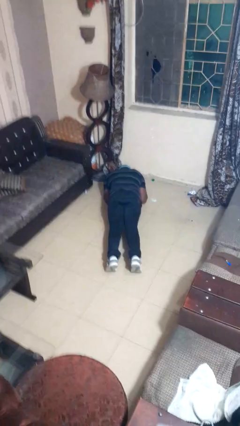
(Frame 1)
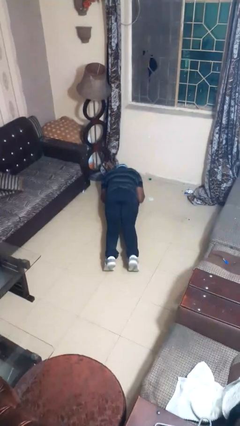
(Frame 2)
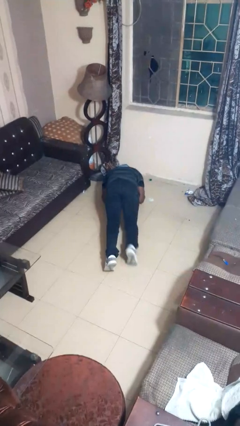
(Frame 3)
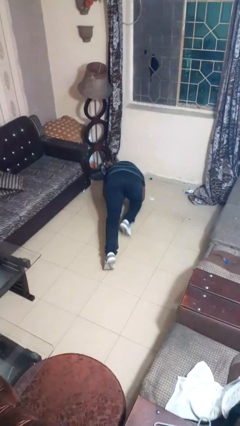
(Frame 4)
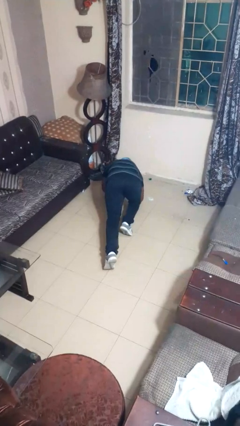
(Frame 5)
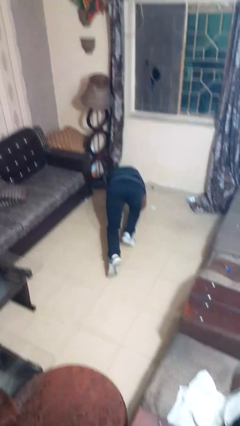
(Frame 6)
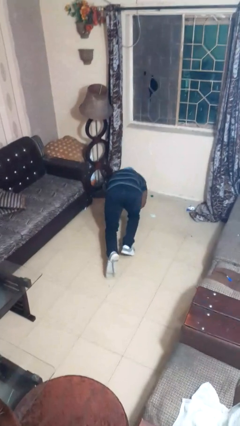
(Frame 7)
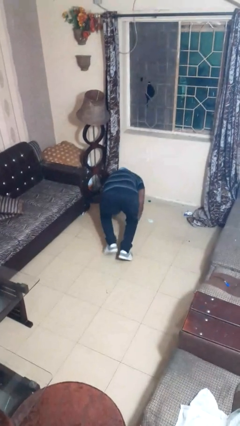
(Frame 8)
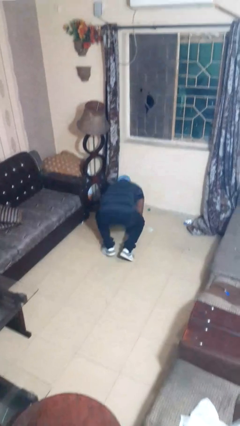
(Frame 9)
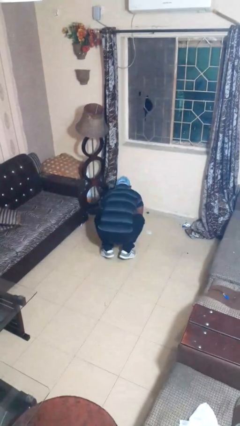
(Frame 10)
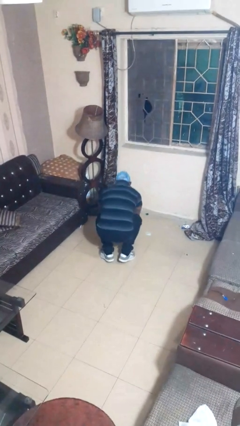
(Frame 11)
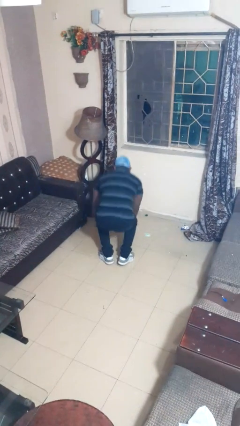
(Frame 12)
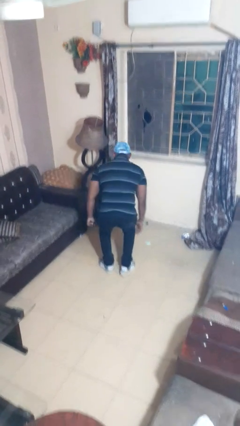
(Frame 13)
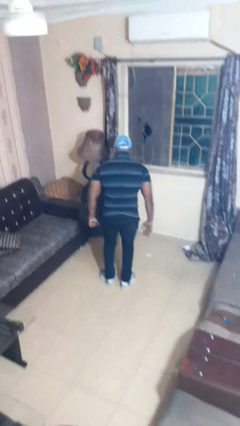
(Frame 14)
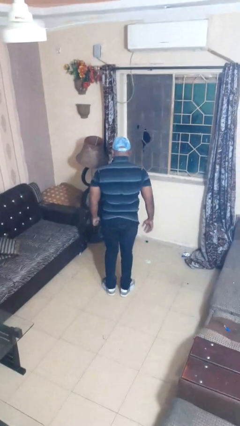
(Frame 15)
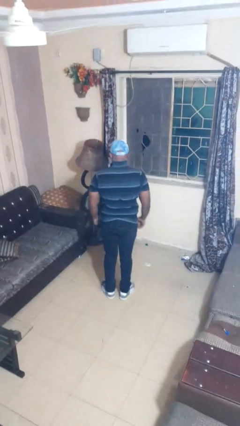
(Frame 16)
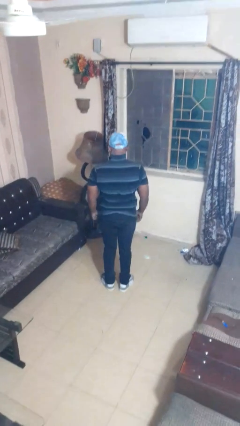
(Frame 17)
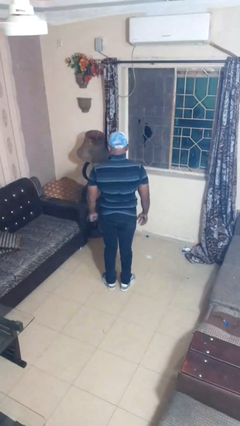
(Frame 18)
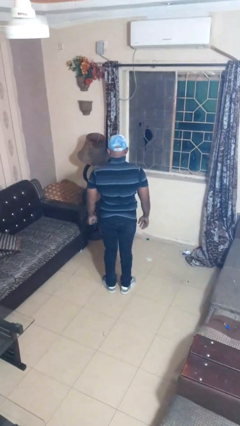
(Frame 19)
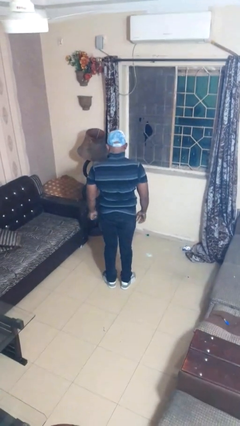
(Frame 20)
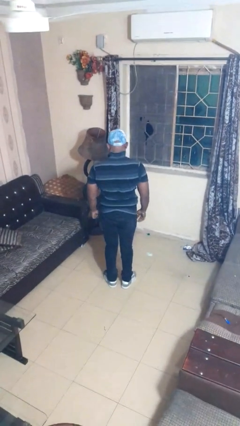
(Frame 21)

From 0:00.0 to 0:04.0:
person stands up from floor

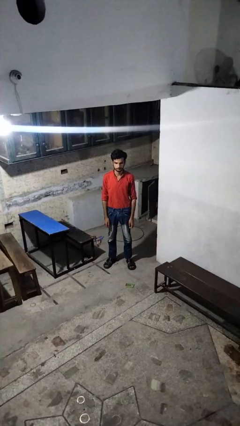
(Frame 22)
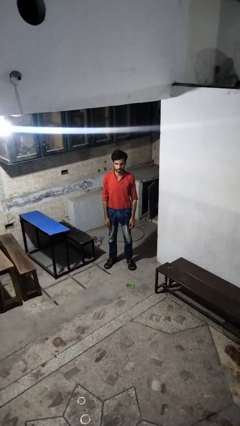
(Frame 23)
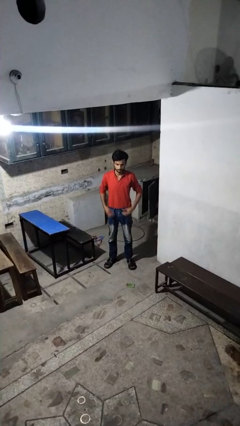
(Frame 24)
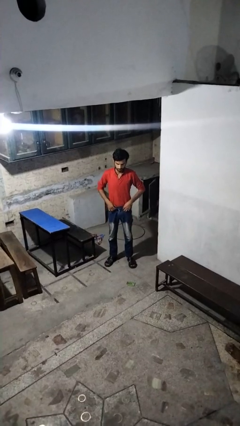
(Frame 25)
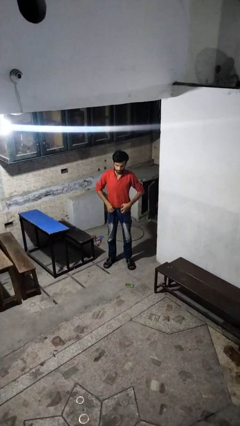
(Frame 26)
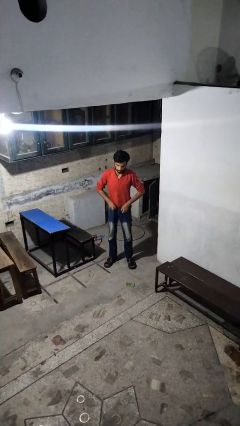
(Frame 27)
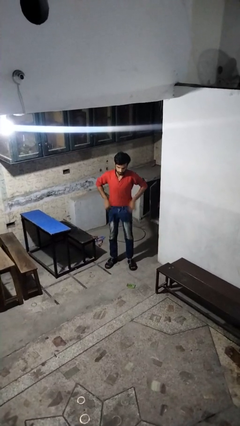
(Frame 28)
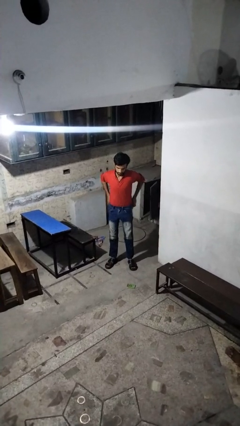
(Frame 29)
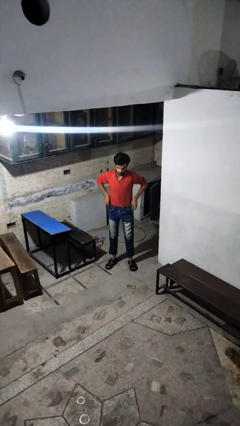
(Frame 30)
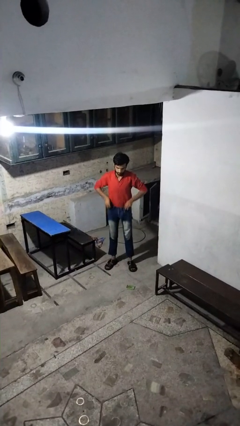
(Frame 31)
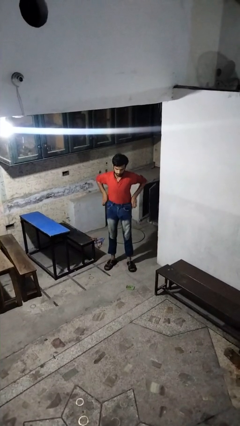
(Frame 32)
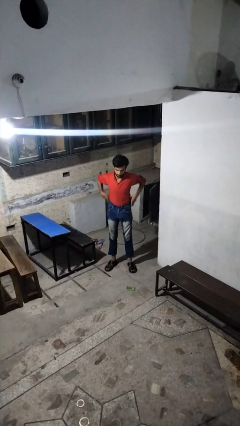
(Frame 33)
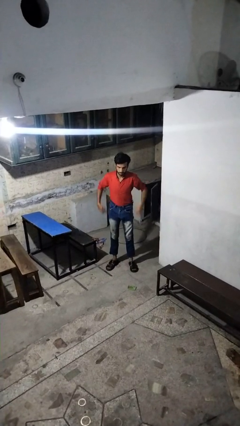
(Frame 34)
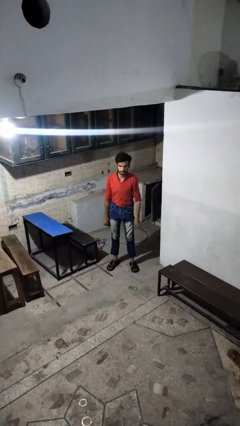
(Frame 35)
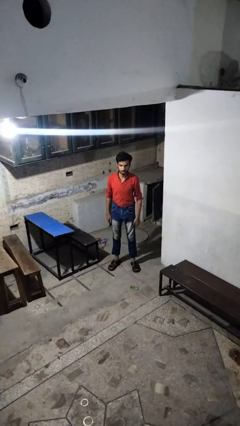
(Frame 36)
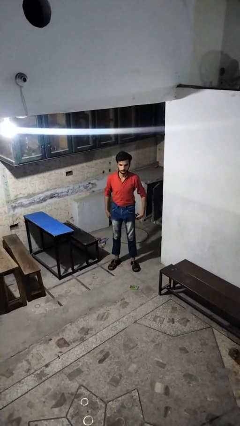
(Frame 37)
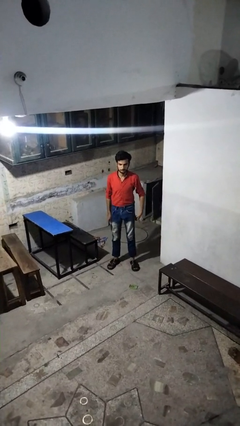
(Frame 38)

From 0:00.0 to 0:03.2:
person hikes up pants

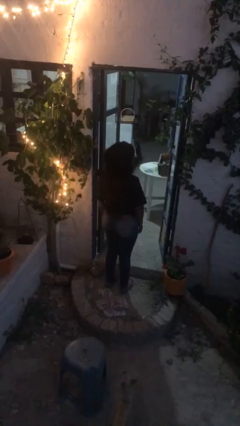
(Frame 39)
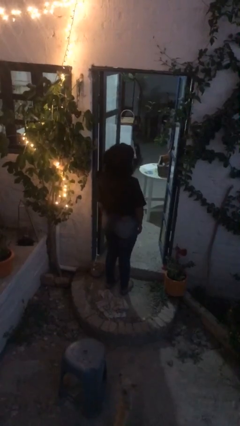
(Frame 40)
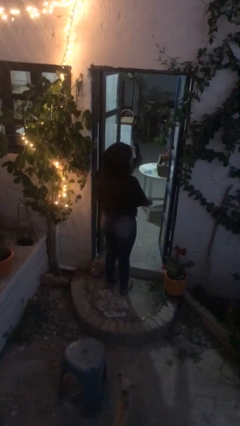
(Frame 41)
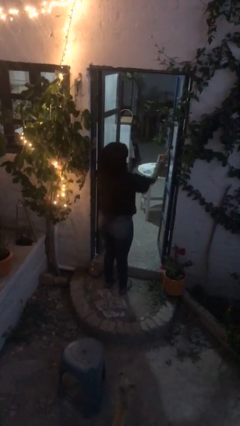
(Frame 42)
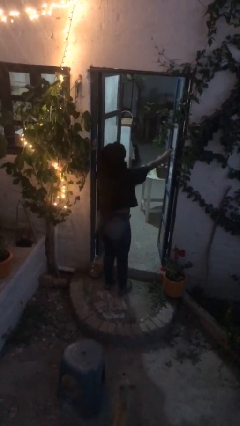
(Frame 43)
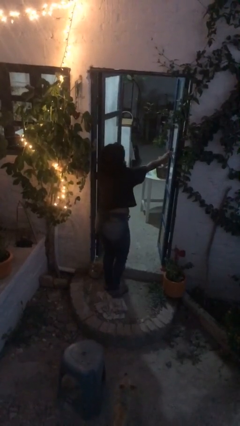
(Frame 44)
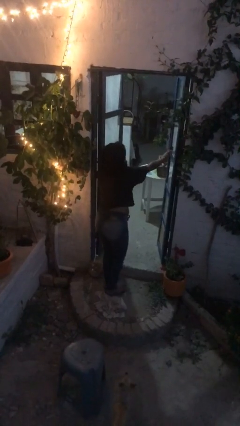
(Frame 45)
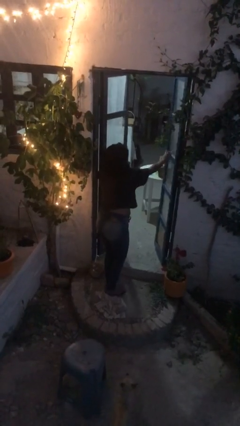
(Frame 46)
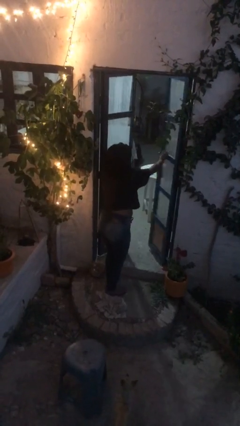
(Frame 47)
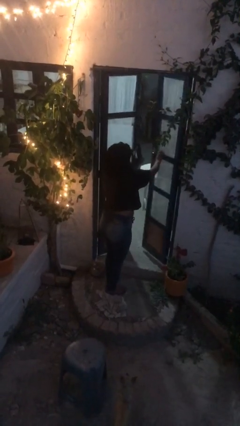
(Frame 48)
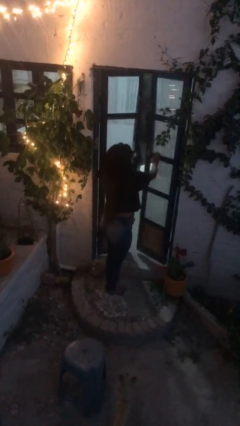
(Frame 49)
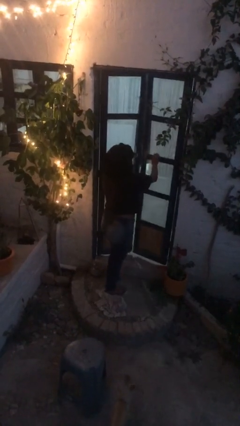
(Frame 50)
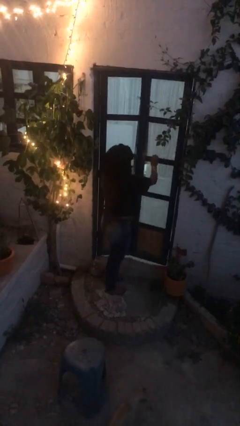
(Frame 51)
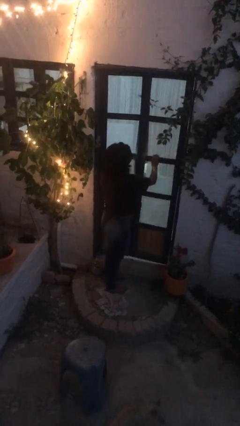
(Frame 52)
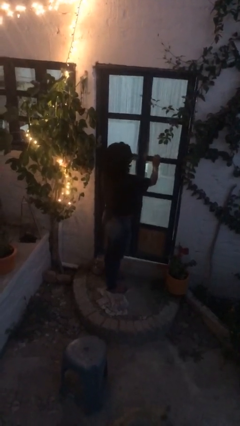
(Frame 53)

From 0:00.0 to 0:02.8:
person closes facility door

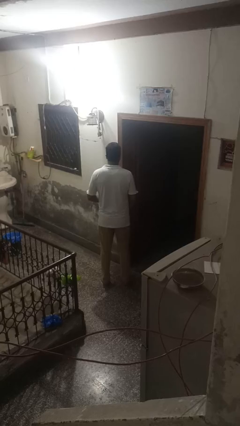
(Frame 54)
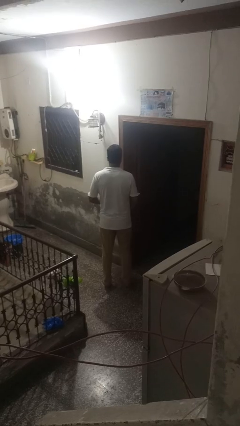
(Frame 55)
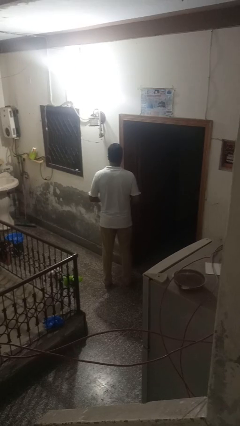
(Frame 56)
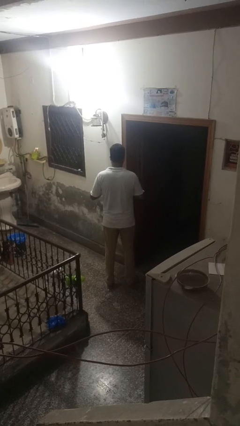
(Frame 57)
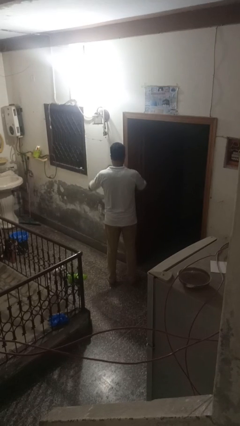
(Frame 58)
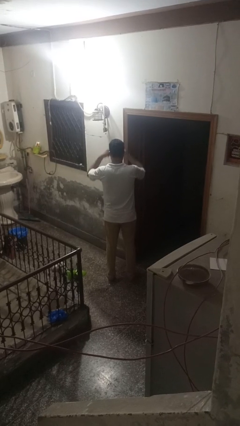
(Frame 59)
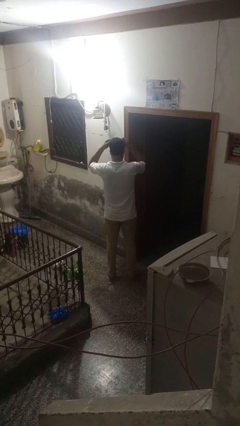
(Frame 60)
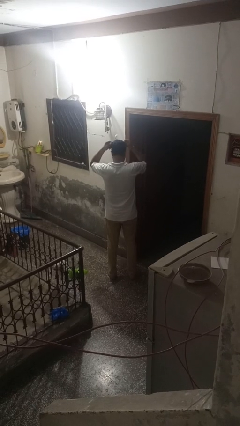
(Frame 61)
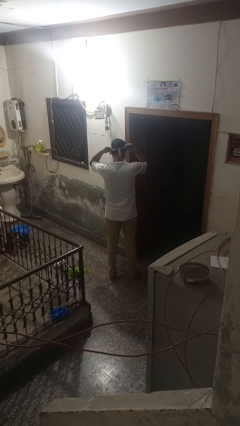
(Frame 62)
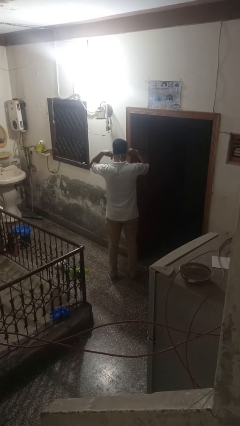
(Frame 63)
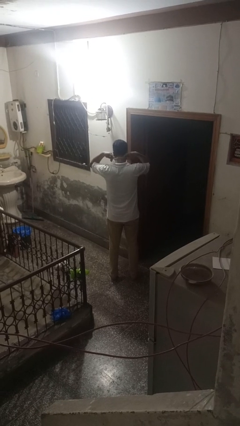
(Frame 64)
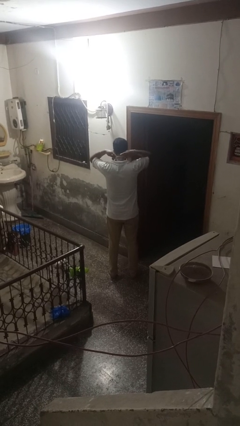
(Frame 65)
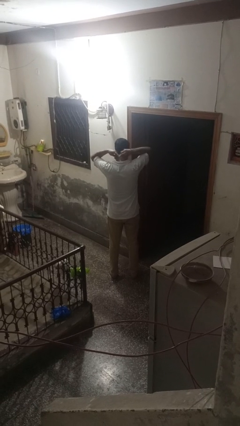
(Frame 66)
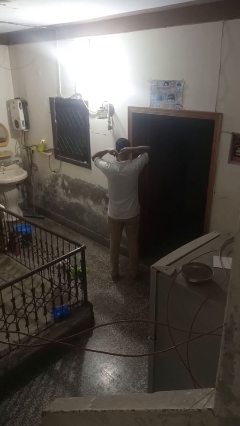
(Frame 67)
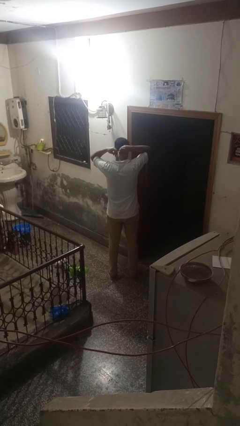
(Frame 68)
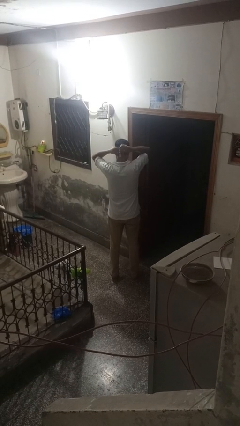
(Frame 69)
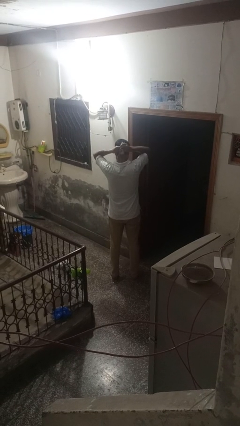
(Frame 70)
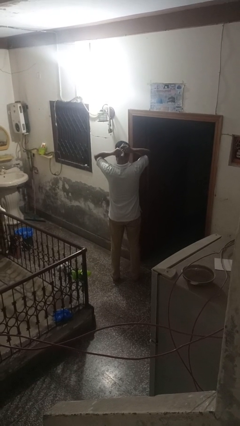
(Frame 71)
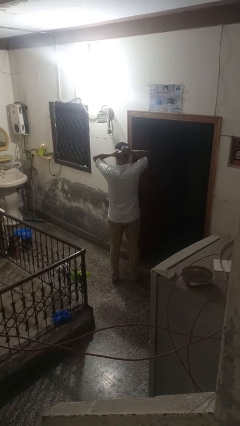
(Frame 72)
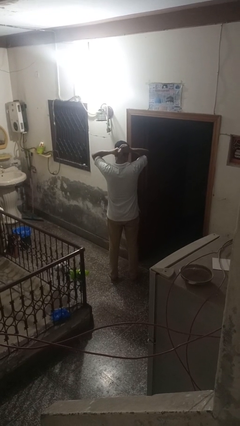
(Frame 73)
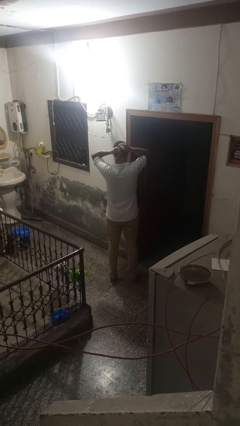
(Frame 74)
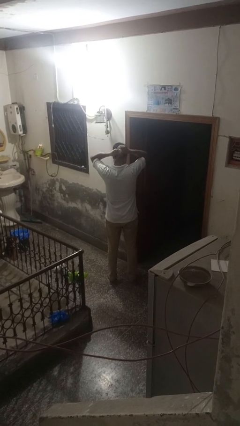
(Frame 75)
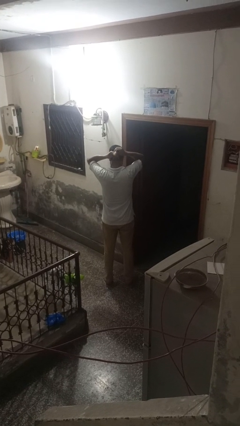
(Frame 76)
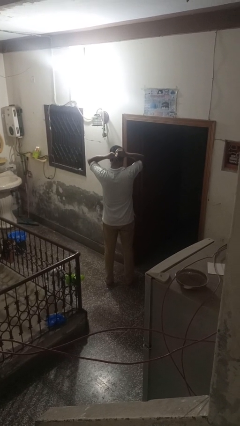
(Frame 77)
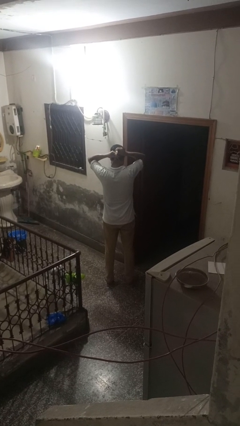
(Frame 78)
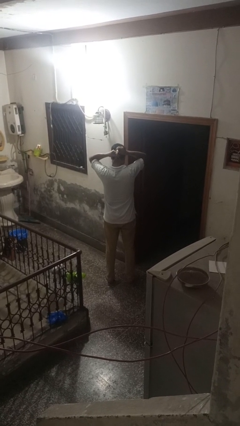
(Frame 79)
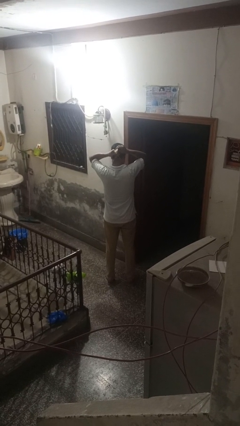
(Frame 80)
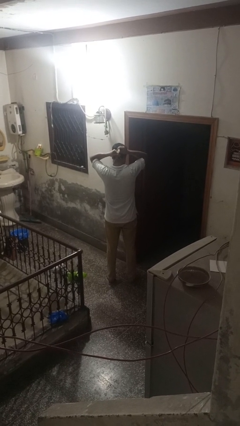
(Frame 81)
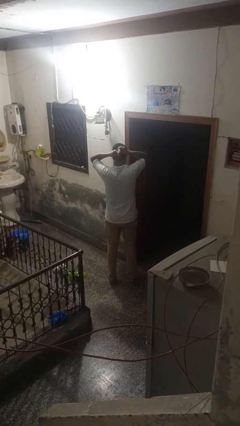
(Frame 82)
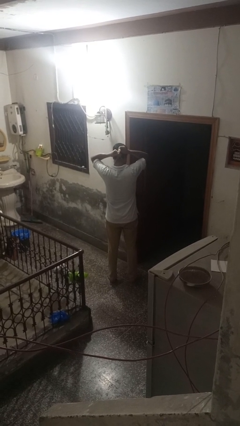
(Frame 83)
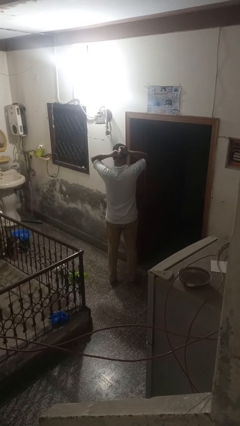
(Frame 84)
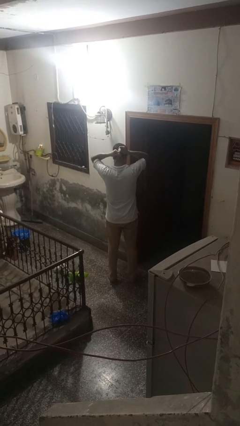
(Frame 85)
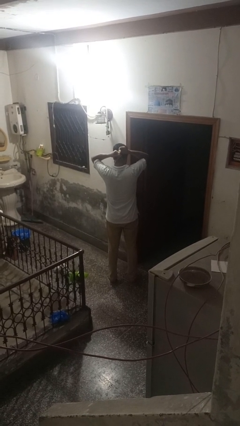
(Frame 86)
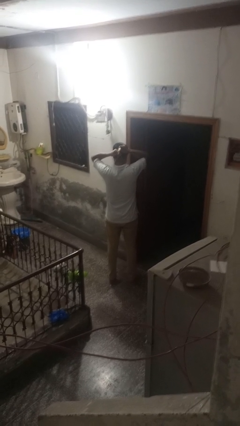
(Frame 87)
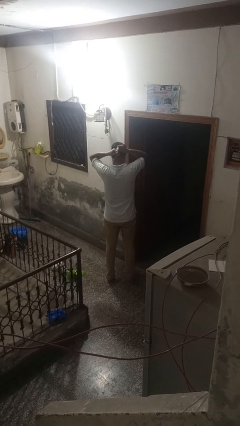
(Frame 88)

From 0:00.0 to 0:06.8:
person puts on necklace

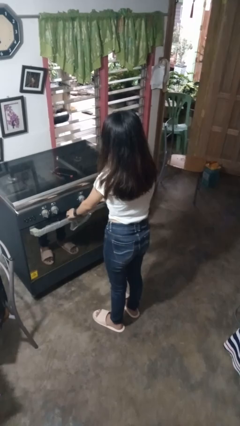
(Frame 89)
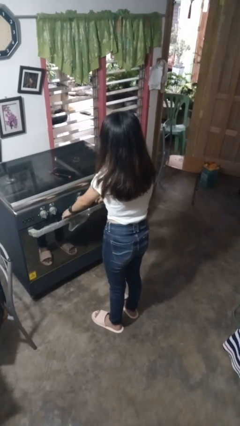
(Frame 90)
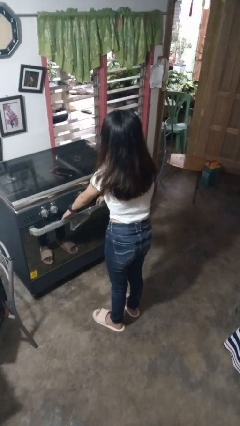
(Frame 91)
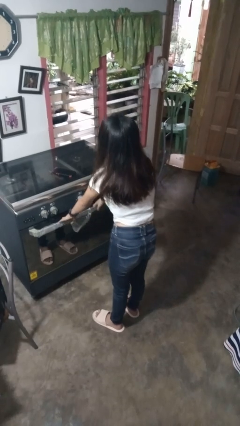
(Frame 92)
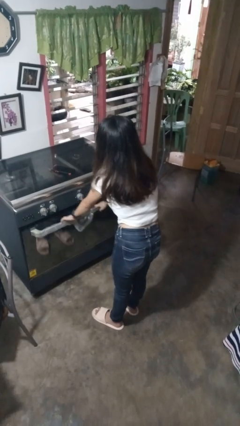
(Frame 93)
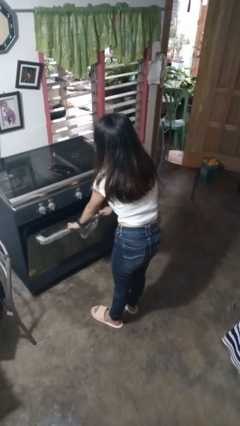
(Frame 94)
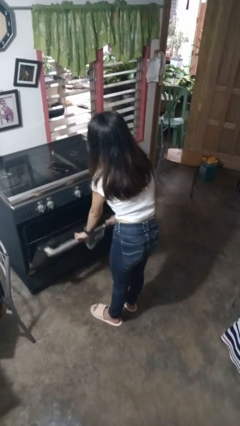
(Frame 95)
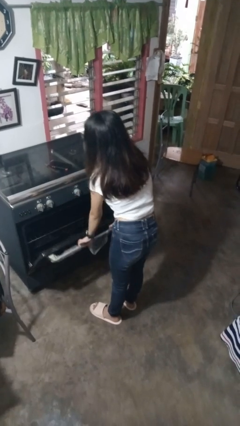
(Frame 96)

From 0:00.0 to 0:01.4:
person opens oven door
